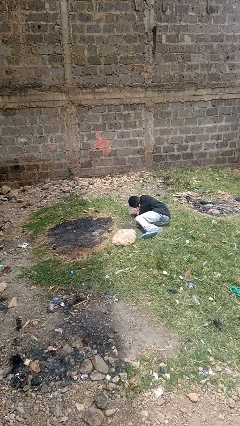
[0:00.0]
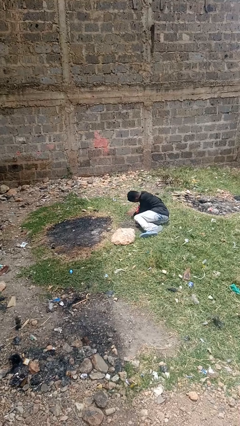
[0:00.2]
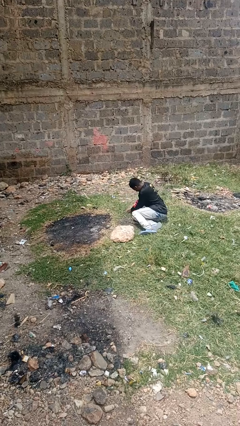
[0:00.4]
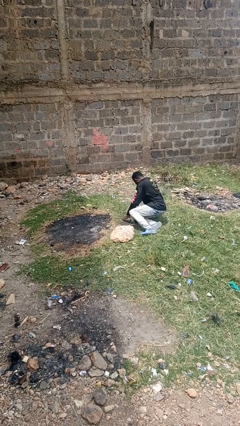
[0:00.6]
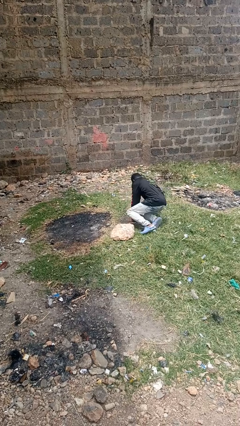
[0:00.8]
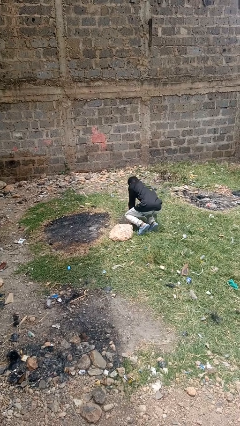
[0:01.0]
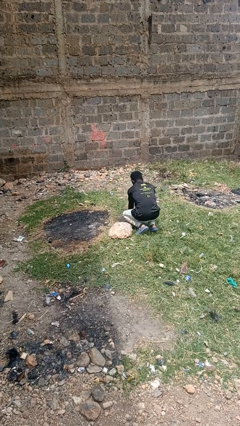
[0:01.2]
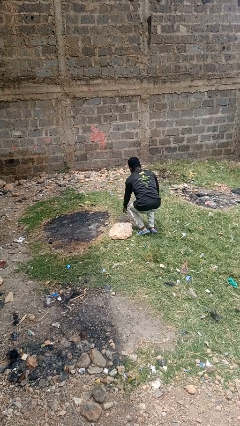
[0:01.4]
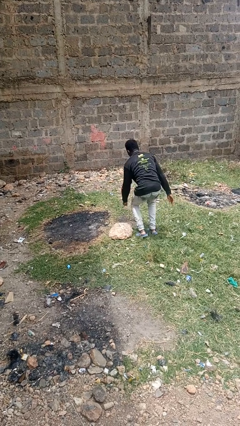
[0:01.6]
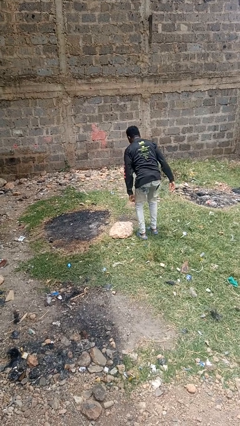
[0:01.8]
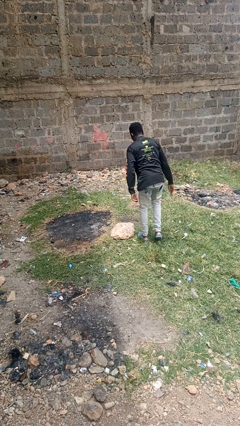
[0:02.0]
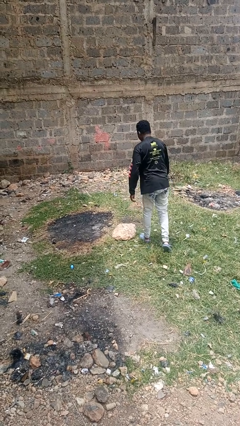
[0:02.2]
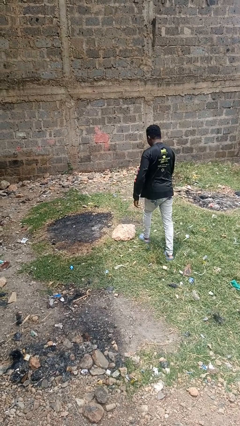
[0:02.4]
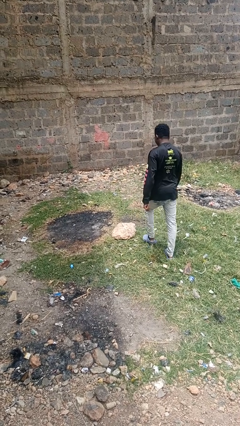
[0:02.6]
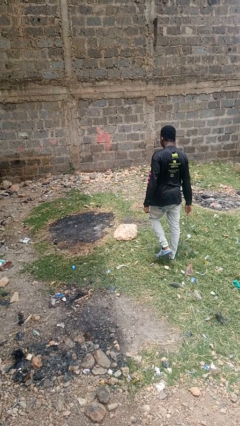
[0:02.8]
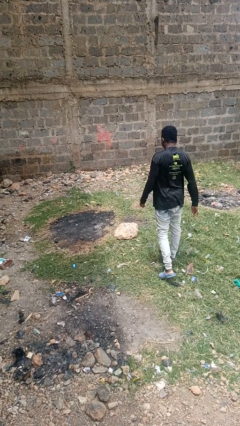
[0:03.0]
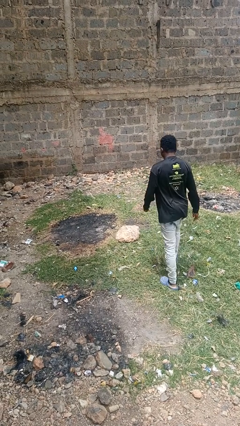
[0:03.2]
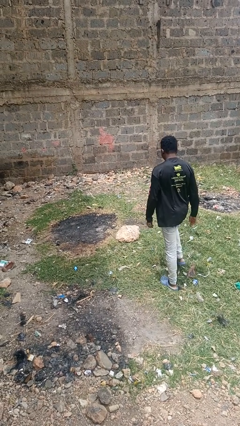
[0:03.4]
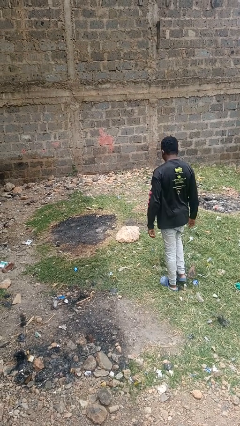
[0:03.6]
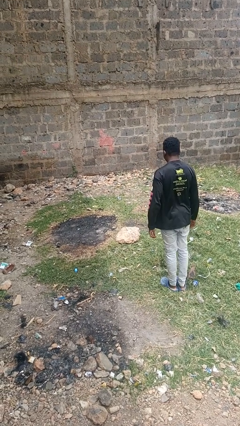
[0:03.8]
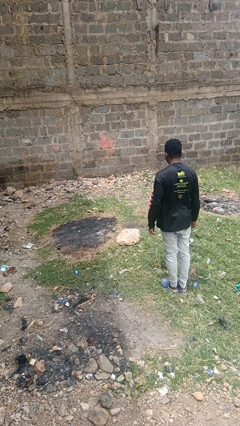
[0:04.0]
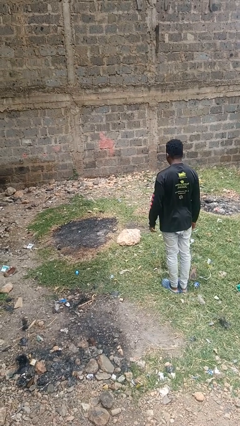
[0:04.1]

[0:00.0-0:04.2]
person stands up from floor

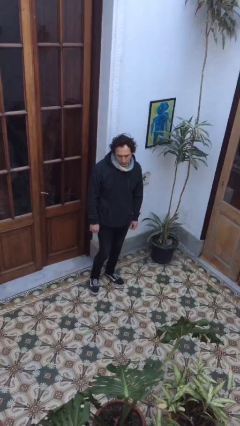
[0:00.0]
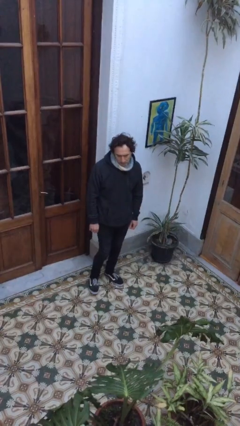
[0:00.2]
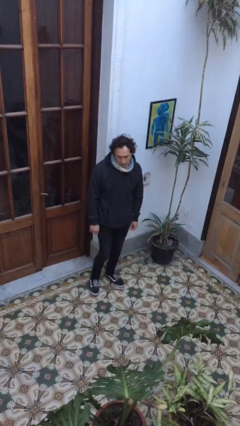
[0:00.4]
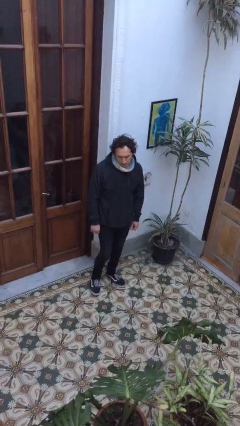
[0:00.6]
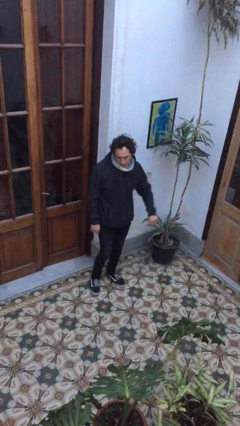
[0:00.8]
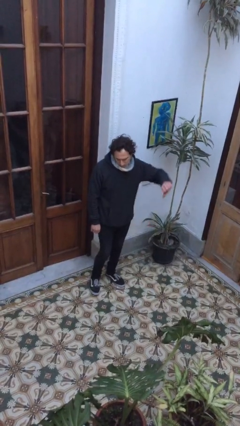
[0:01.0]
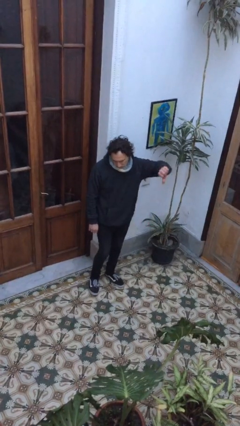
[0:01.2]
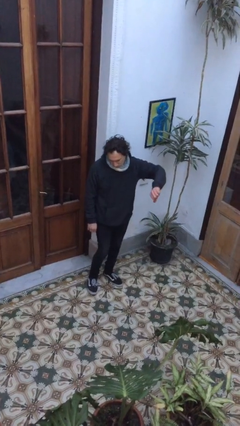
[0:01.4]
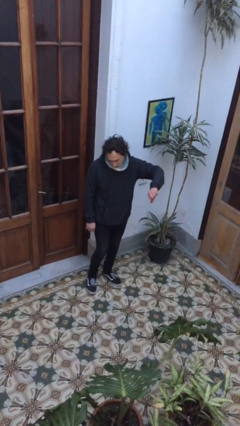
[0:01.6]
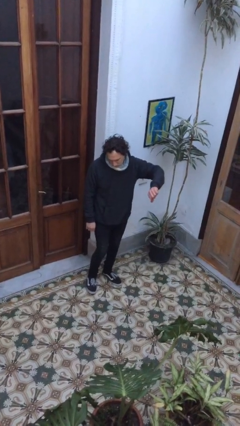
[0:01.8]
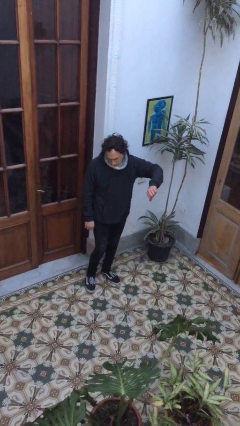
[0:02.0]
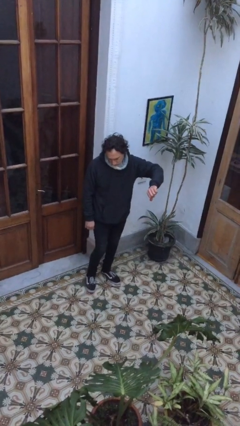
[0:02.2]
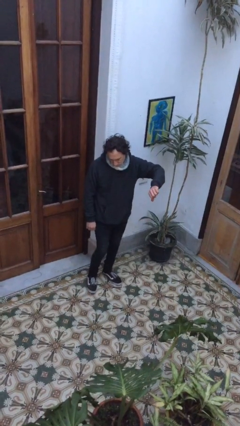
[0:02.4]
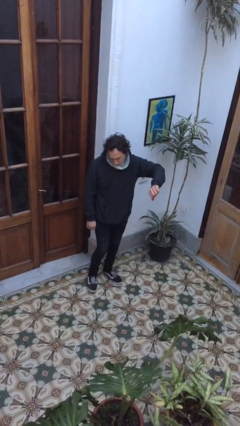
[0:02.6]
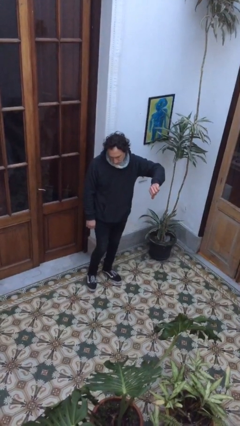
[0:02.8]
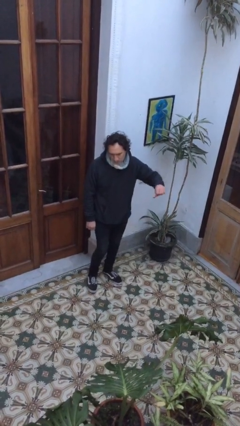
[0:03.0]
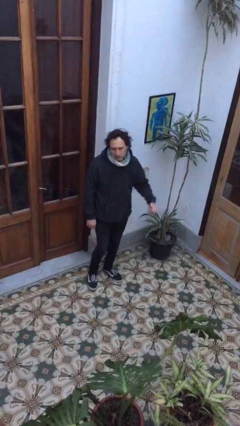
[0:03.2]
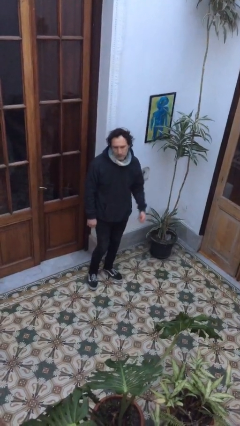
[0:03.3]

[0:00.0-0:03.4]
person gestures thumbs down

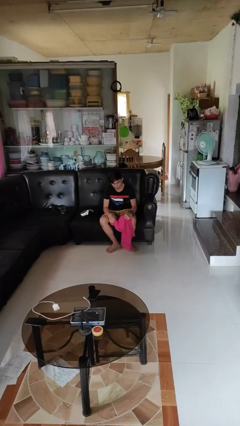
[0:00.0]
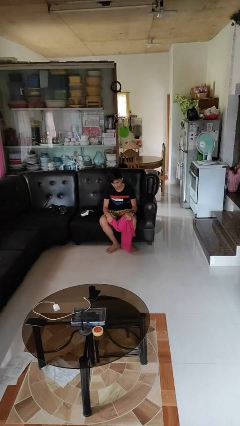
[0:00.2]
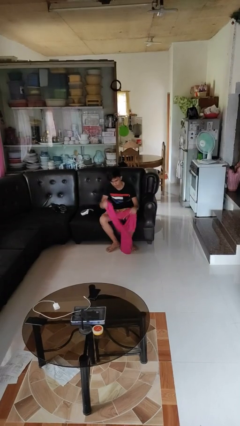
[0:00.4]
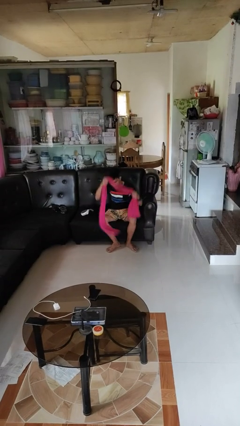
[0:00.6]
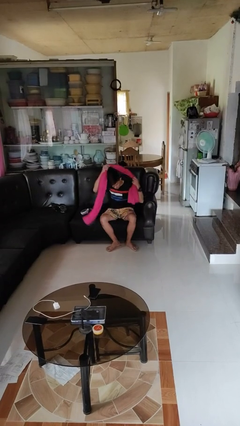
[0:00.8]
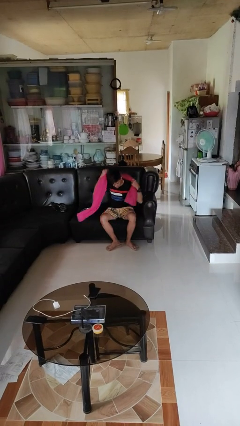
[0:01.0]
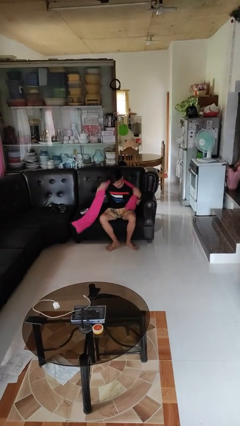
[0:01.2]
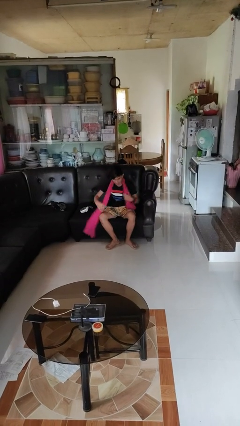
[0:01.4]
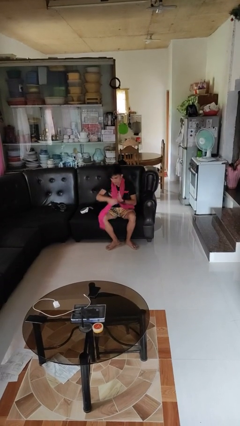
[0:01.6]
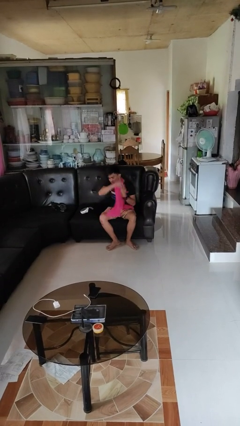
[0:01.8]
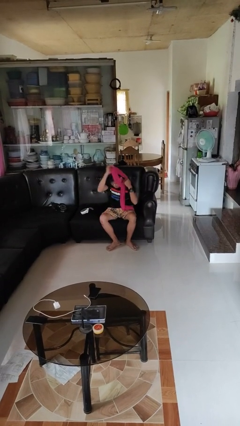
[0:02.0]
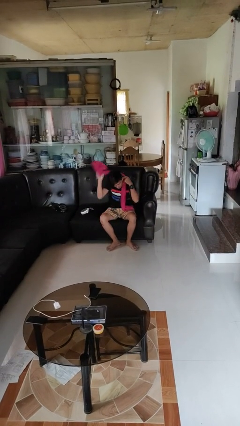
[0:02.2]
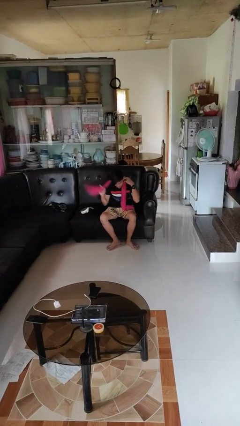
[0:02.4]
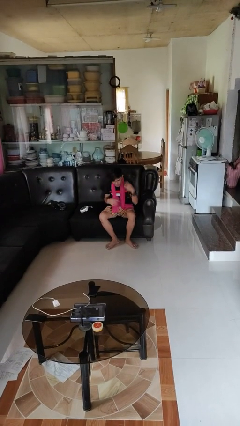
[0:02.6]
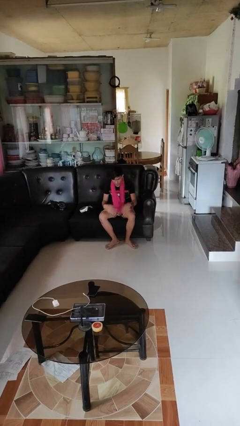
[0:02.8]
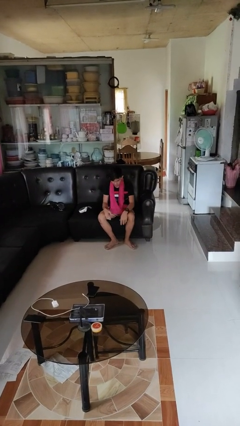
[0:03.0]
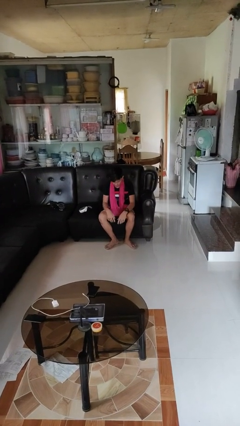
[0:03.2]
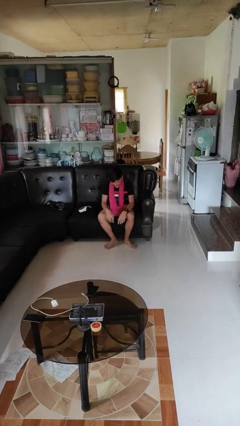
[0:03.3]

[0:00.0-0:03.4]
person puts on scarf

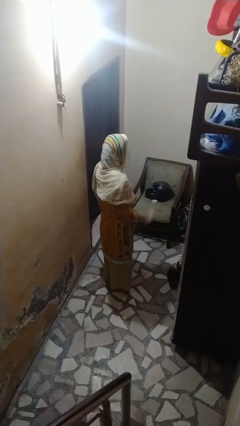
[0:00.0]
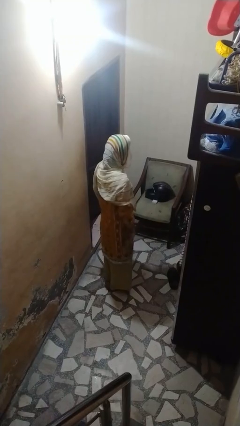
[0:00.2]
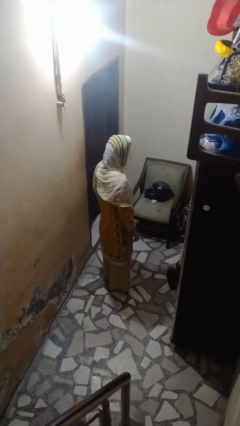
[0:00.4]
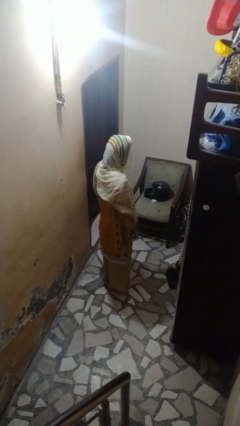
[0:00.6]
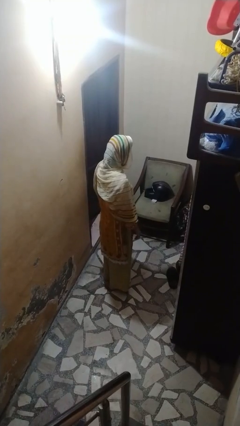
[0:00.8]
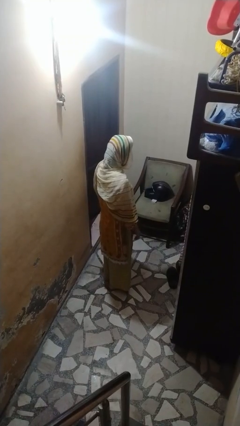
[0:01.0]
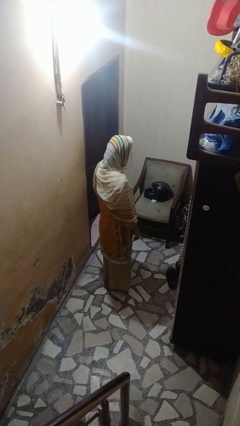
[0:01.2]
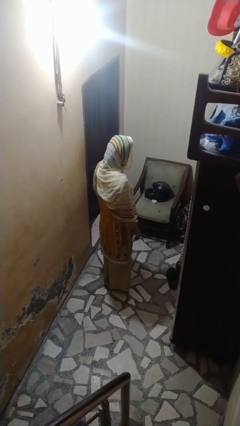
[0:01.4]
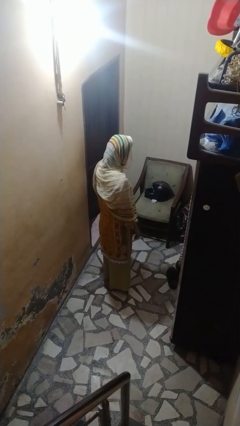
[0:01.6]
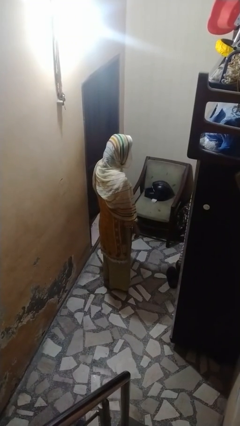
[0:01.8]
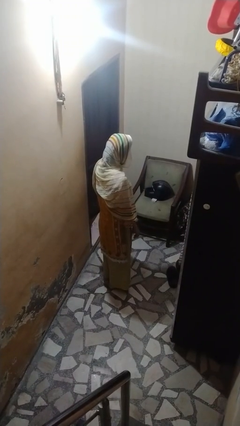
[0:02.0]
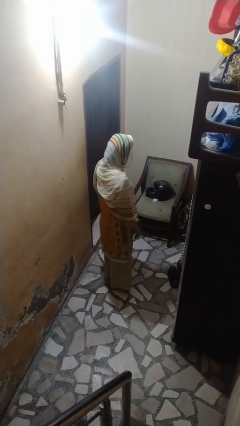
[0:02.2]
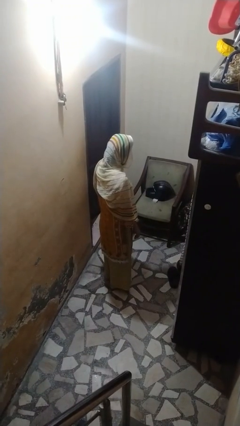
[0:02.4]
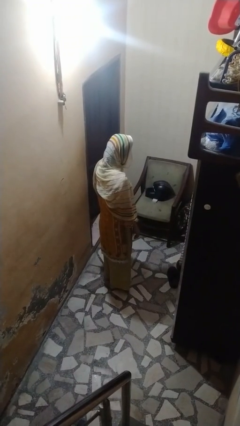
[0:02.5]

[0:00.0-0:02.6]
person gestures lower hand

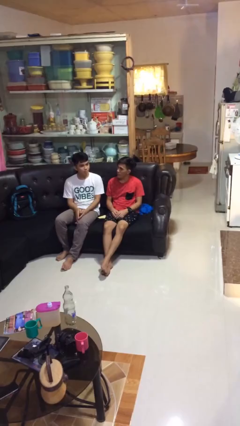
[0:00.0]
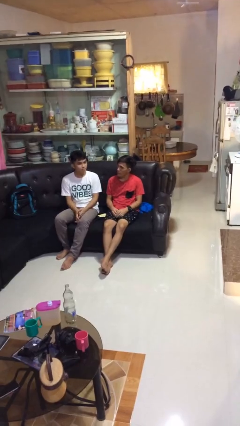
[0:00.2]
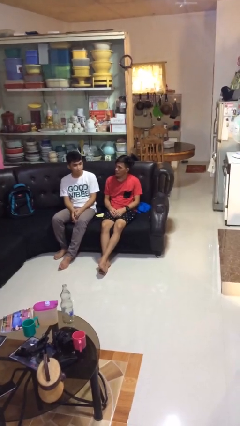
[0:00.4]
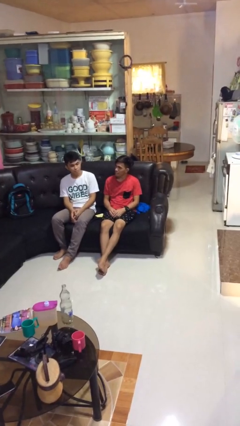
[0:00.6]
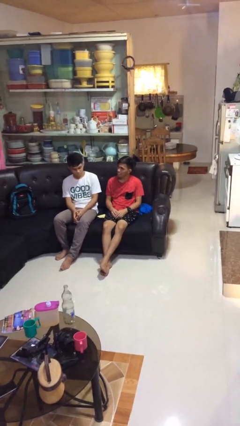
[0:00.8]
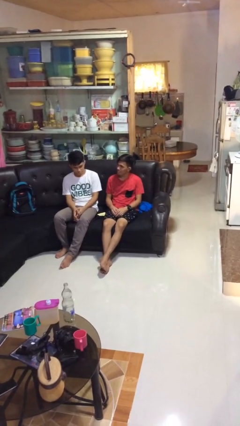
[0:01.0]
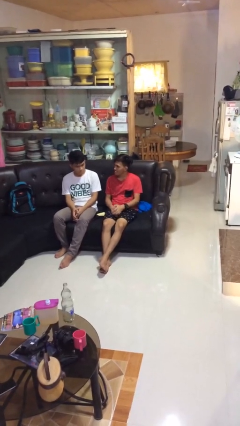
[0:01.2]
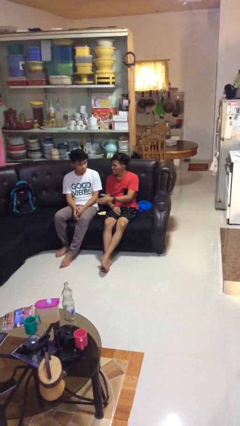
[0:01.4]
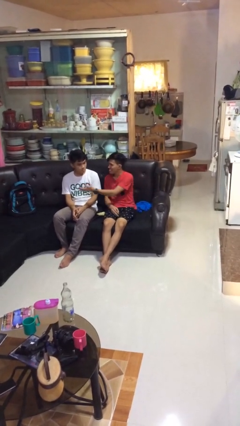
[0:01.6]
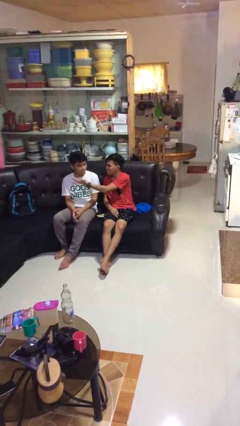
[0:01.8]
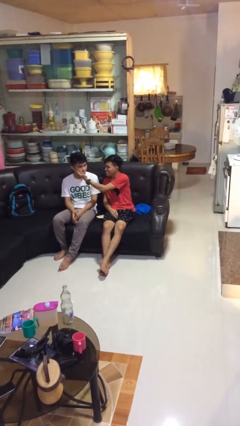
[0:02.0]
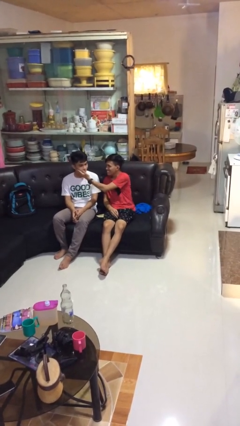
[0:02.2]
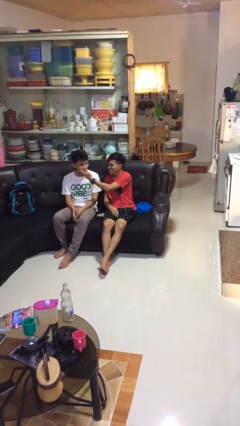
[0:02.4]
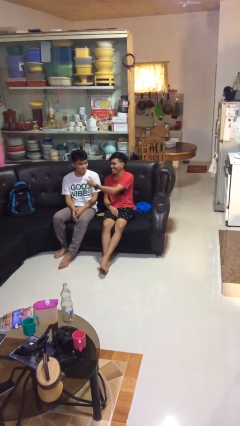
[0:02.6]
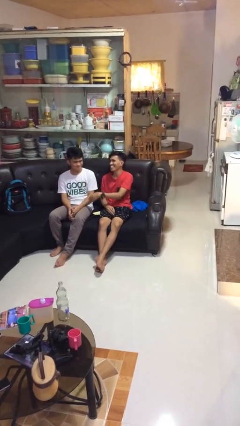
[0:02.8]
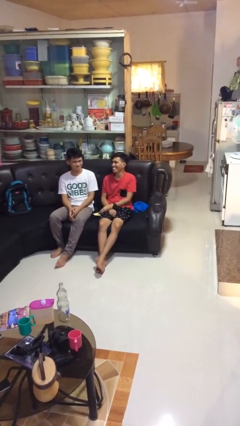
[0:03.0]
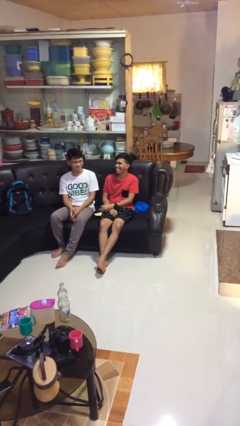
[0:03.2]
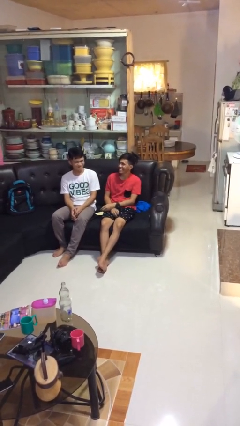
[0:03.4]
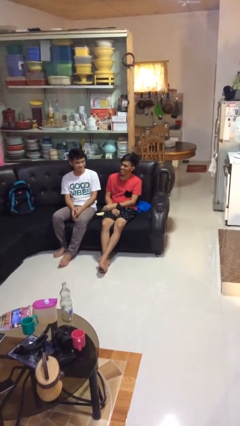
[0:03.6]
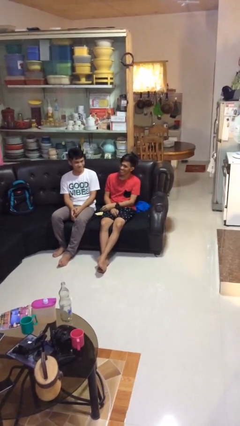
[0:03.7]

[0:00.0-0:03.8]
person touches face of person
